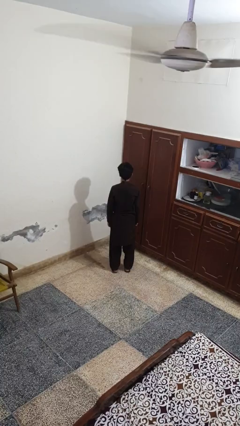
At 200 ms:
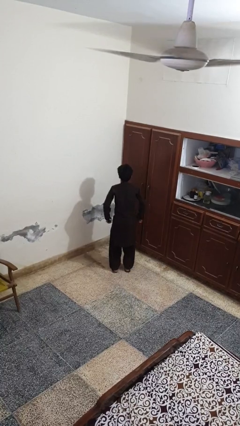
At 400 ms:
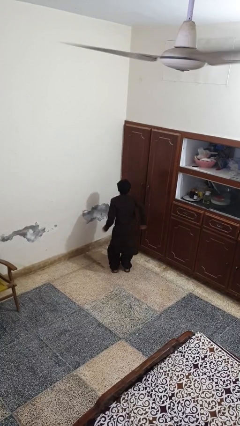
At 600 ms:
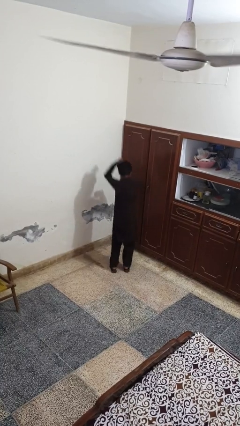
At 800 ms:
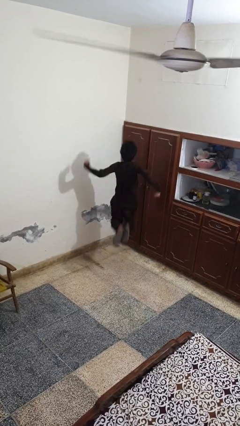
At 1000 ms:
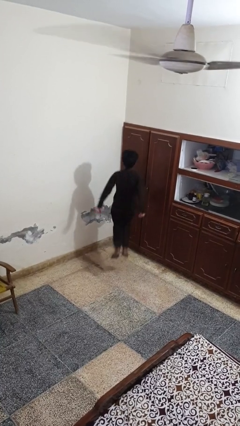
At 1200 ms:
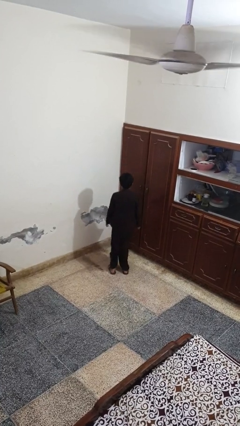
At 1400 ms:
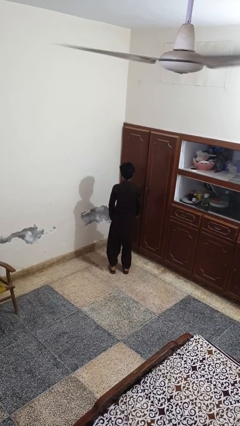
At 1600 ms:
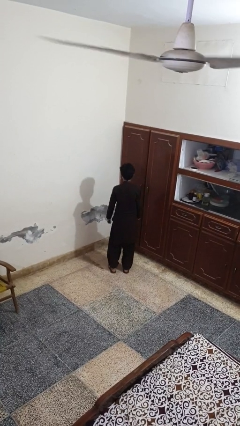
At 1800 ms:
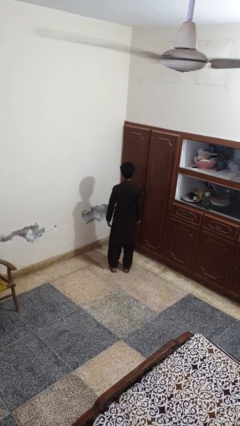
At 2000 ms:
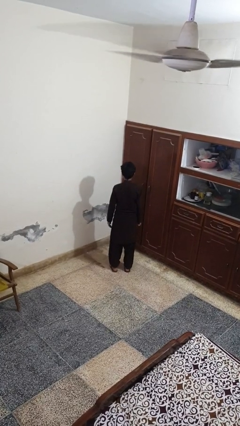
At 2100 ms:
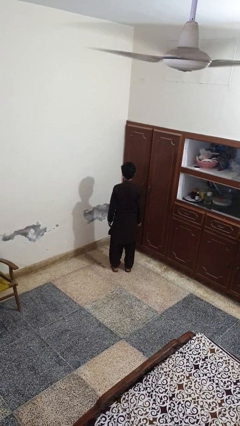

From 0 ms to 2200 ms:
person jumps

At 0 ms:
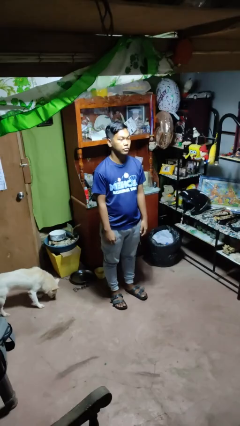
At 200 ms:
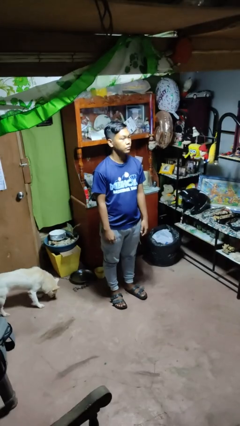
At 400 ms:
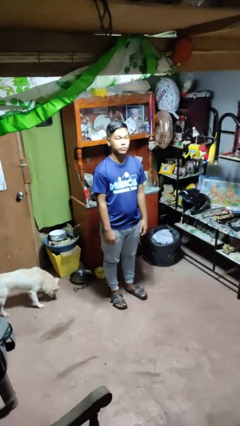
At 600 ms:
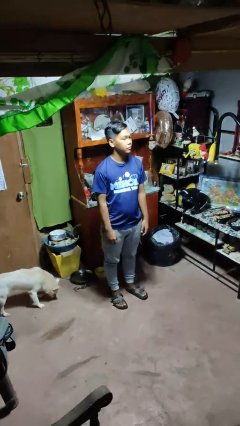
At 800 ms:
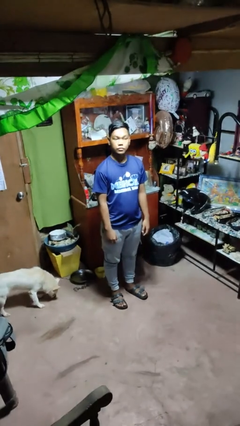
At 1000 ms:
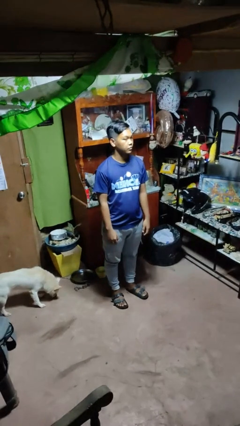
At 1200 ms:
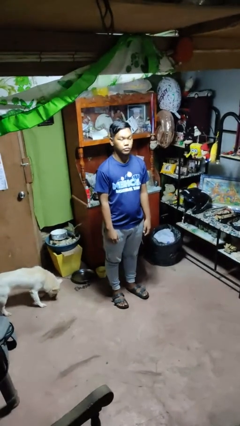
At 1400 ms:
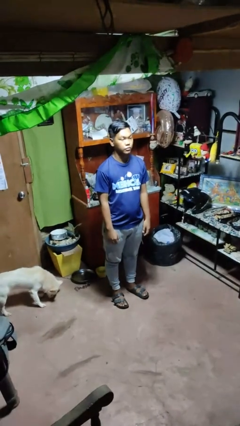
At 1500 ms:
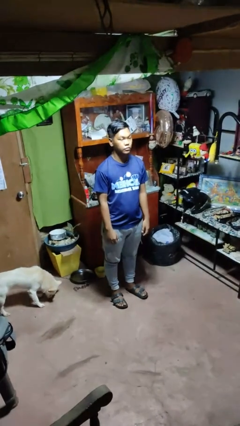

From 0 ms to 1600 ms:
person shakes head

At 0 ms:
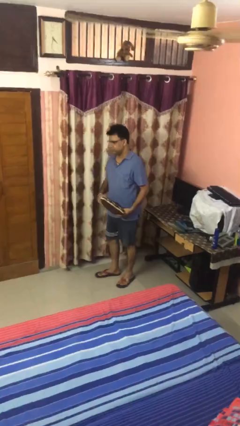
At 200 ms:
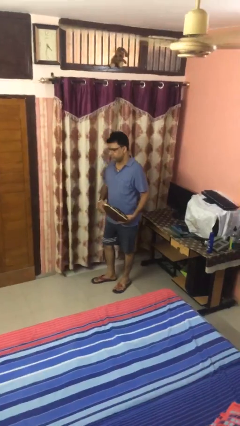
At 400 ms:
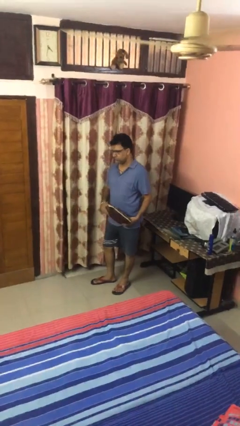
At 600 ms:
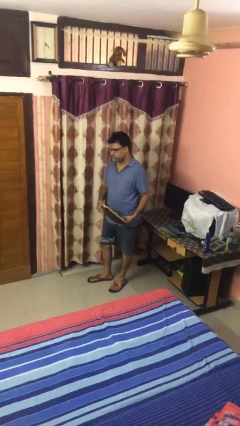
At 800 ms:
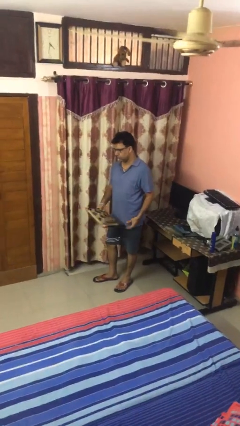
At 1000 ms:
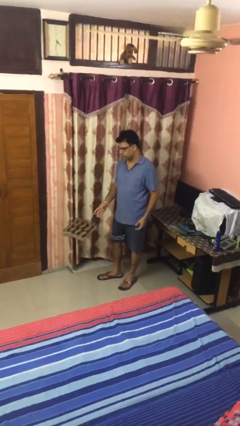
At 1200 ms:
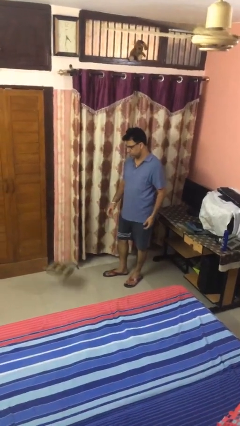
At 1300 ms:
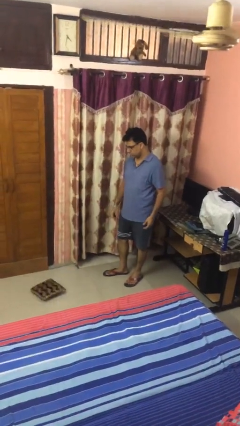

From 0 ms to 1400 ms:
person throws object to ground

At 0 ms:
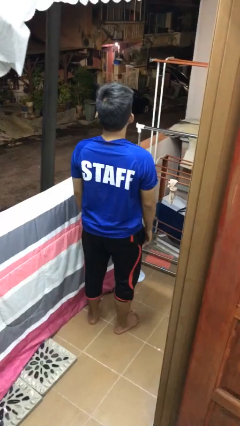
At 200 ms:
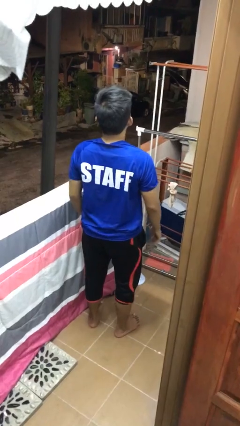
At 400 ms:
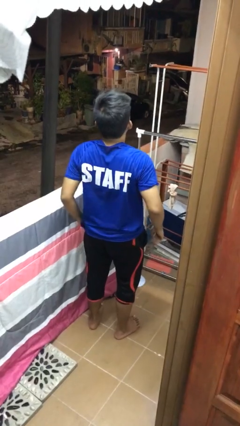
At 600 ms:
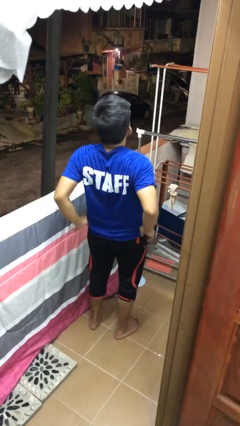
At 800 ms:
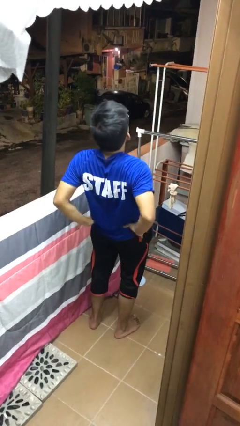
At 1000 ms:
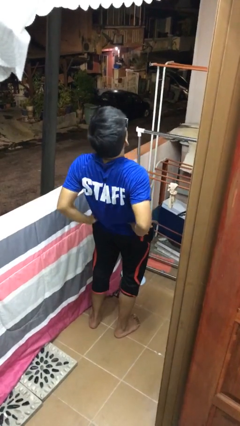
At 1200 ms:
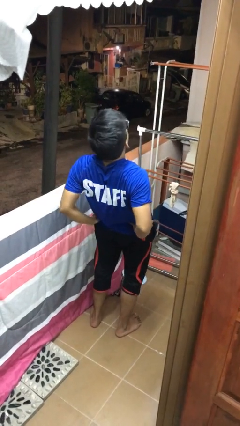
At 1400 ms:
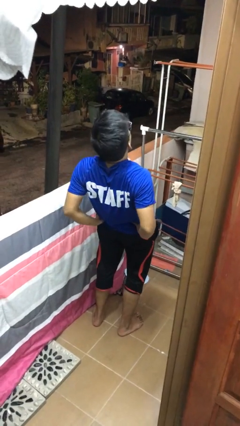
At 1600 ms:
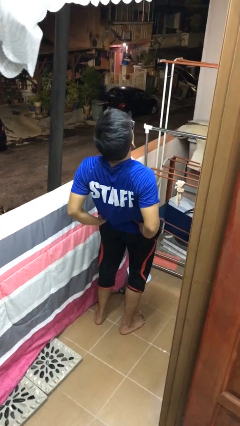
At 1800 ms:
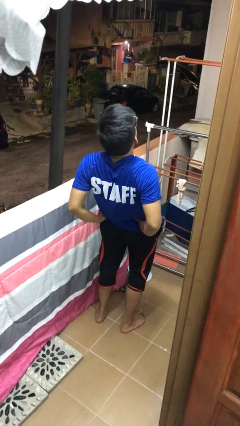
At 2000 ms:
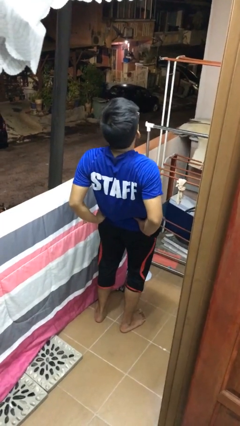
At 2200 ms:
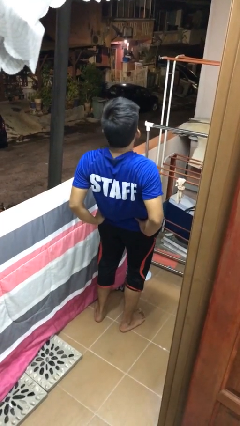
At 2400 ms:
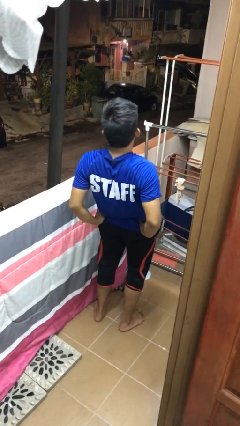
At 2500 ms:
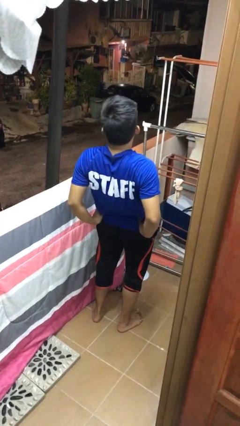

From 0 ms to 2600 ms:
person stretches back

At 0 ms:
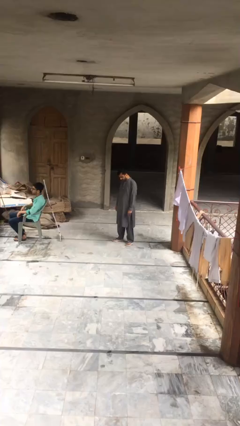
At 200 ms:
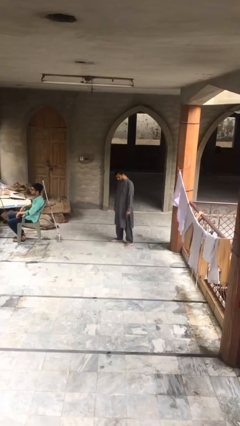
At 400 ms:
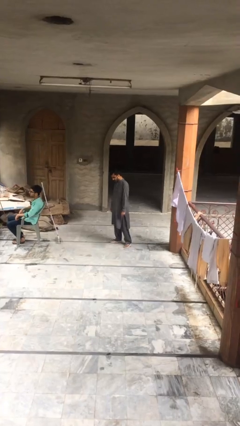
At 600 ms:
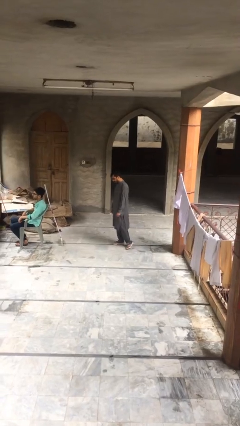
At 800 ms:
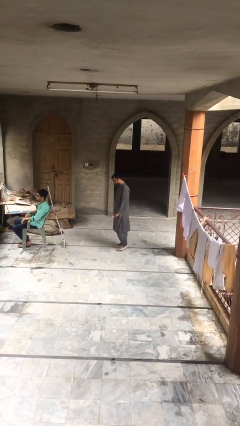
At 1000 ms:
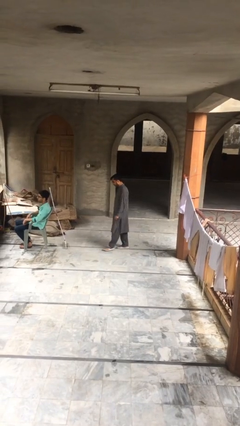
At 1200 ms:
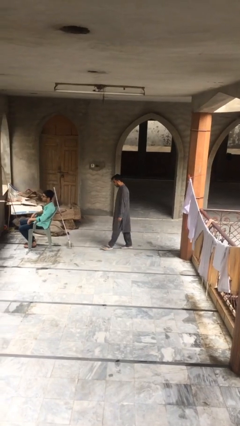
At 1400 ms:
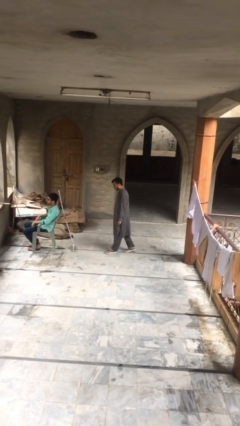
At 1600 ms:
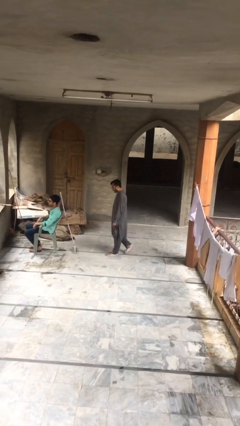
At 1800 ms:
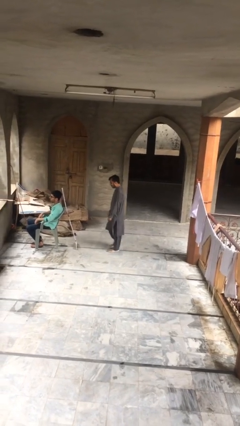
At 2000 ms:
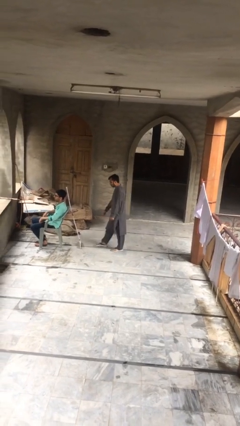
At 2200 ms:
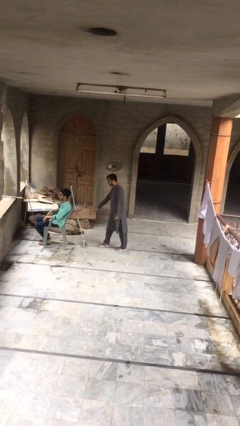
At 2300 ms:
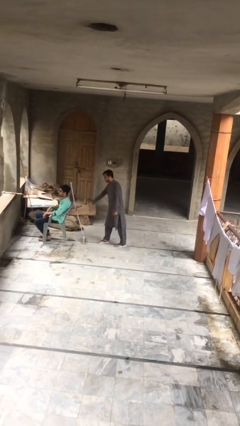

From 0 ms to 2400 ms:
person steals object from person

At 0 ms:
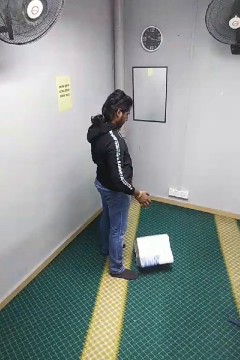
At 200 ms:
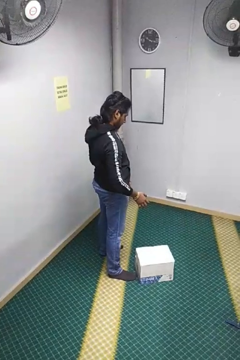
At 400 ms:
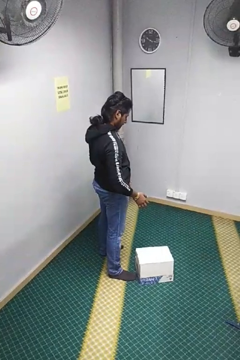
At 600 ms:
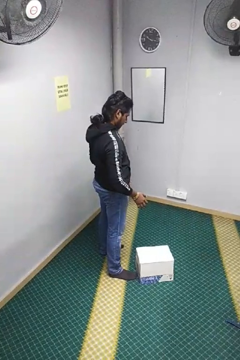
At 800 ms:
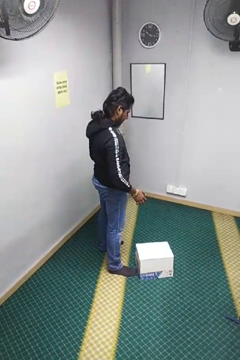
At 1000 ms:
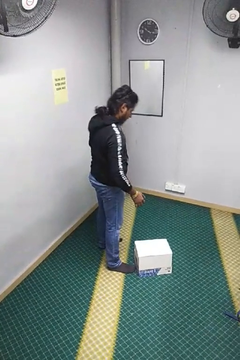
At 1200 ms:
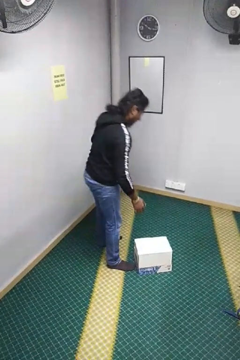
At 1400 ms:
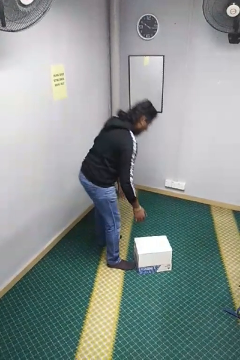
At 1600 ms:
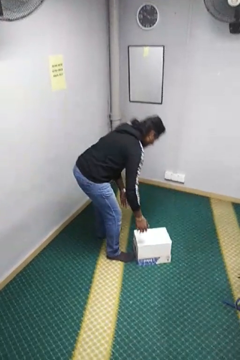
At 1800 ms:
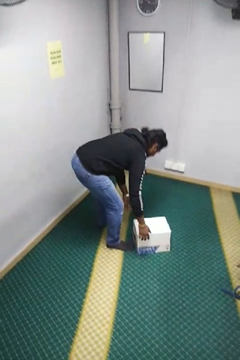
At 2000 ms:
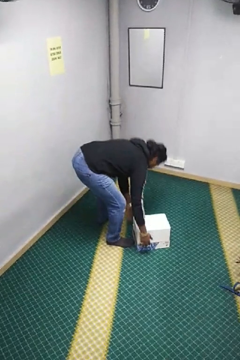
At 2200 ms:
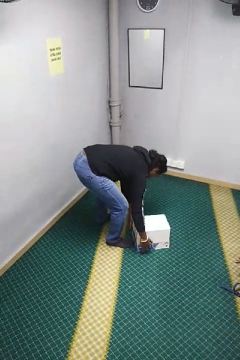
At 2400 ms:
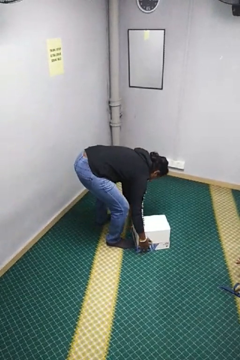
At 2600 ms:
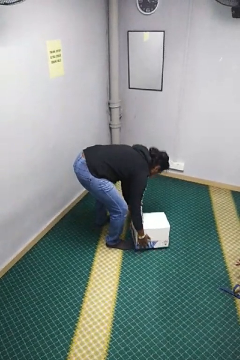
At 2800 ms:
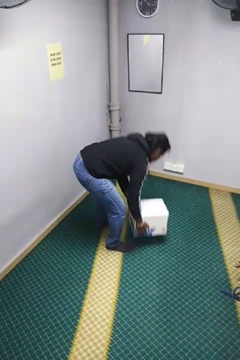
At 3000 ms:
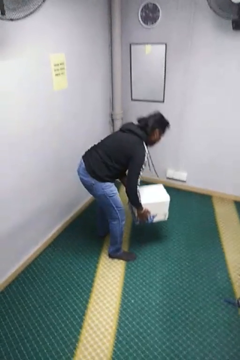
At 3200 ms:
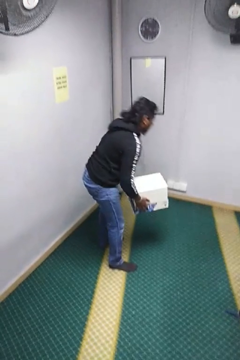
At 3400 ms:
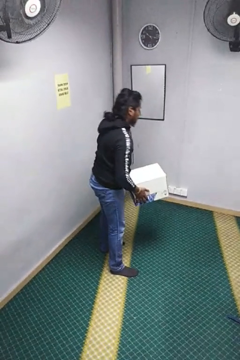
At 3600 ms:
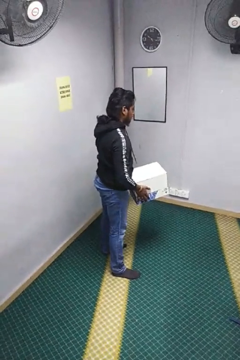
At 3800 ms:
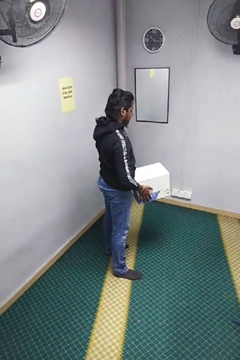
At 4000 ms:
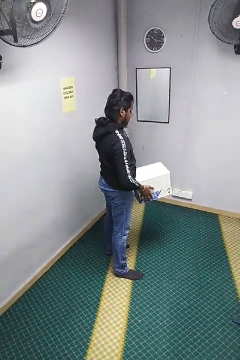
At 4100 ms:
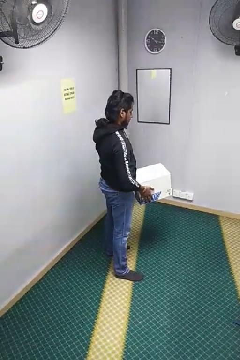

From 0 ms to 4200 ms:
person picks up object from floor

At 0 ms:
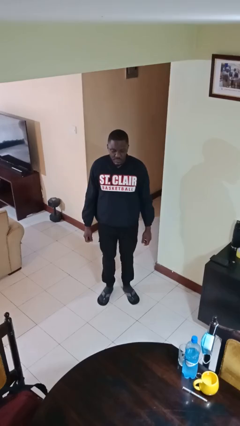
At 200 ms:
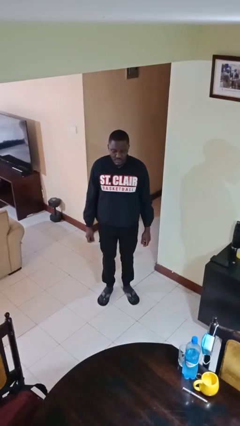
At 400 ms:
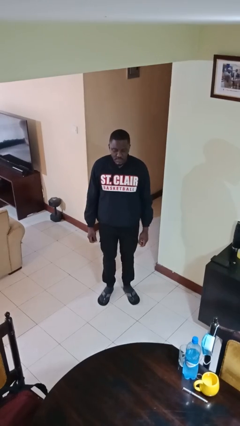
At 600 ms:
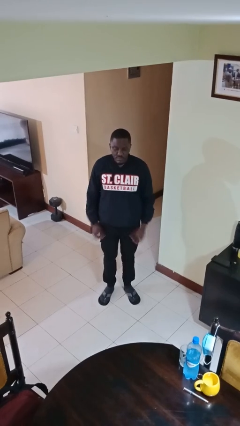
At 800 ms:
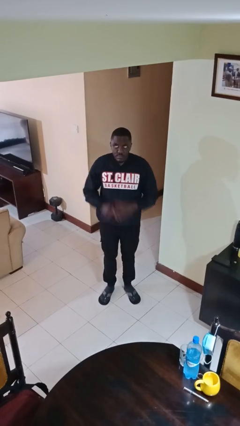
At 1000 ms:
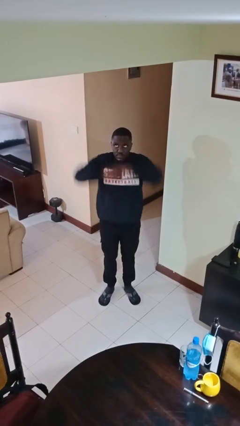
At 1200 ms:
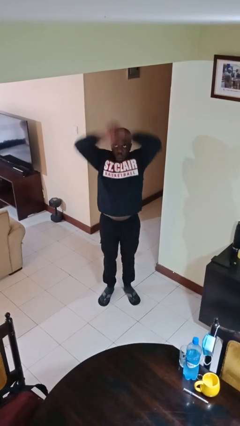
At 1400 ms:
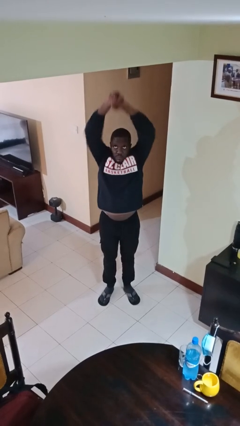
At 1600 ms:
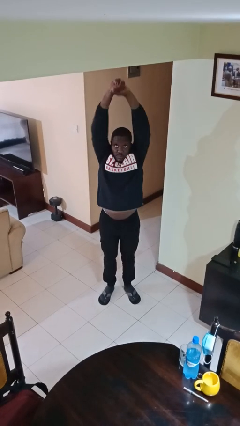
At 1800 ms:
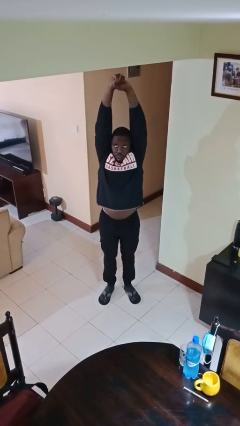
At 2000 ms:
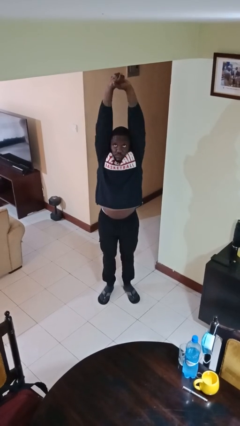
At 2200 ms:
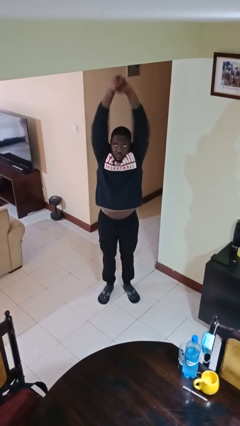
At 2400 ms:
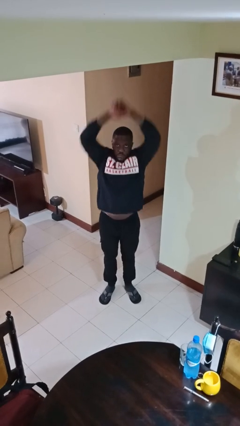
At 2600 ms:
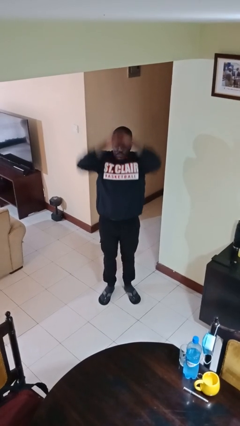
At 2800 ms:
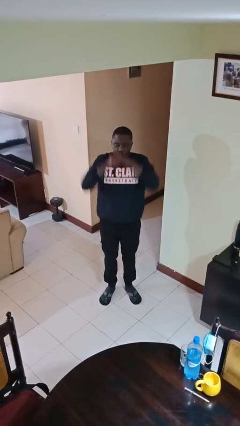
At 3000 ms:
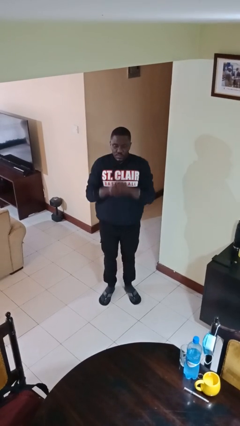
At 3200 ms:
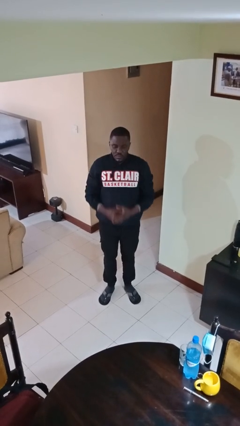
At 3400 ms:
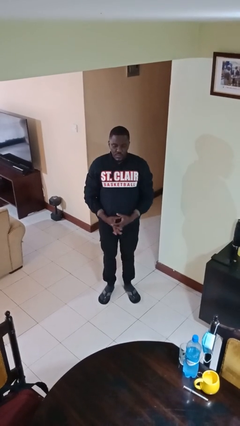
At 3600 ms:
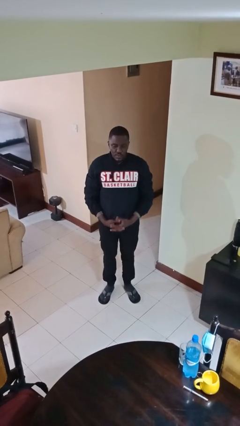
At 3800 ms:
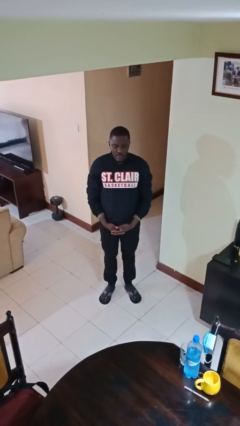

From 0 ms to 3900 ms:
person stretches arms over head
